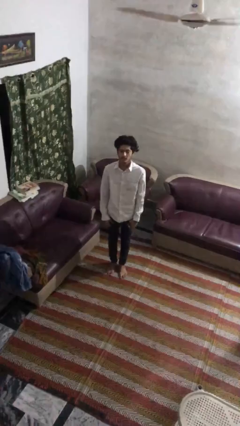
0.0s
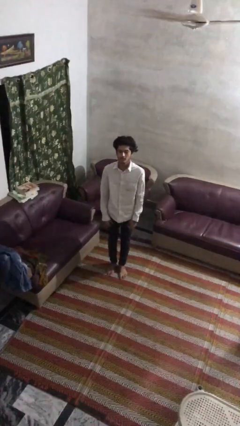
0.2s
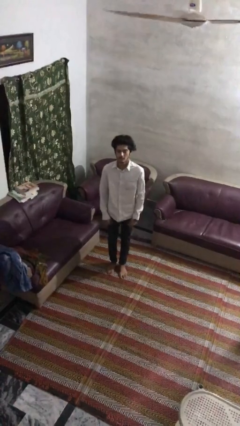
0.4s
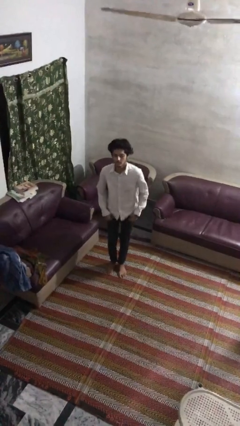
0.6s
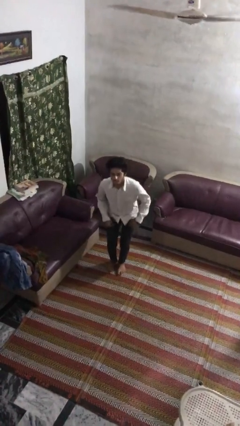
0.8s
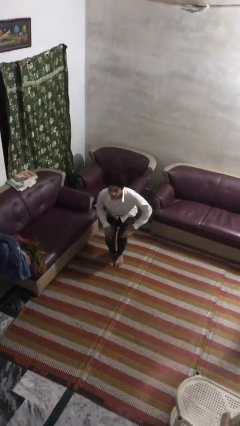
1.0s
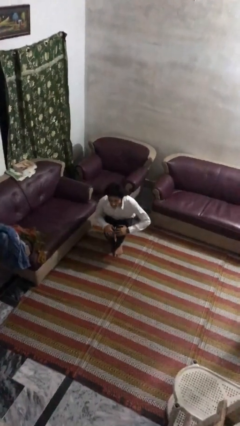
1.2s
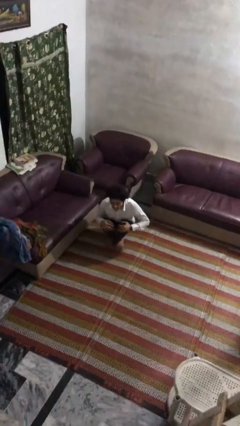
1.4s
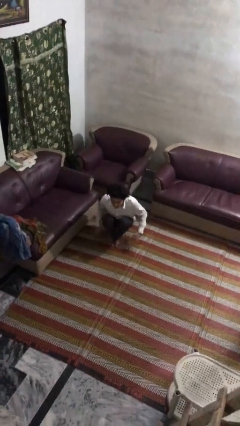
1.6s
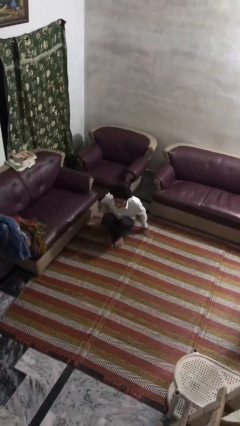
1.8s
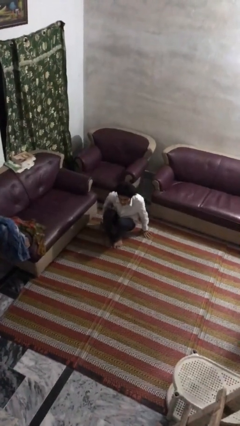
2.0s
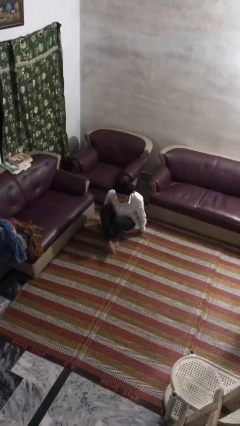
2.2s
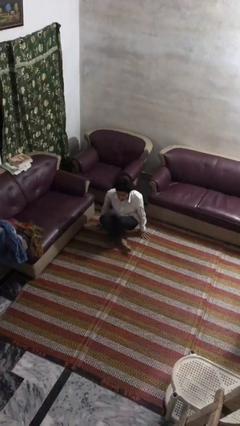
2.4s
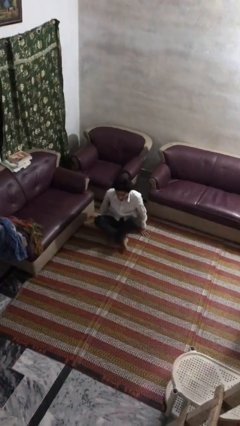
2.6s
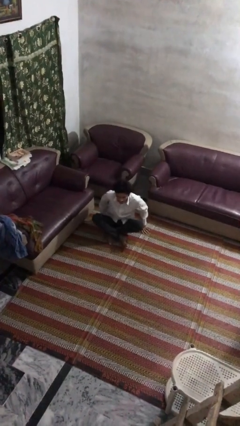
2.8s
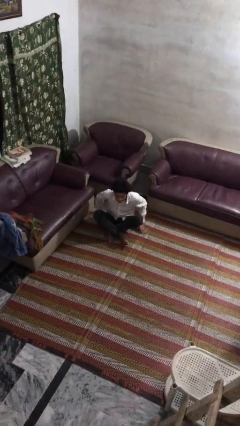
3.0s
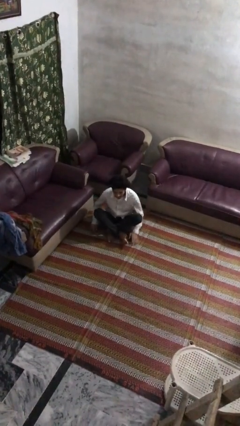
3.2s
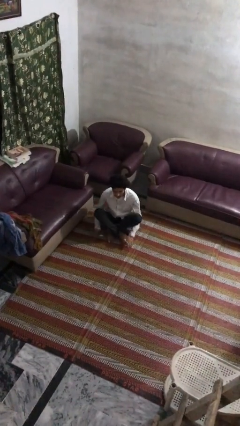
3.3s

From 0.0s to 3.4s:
person sits crisscross

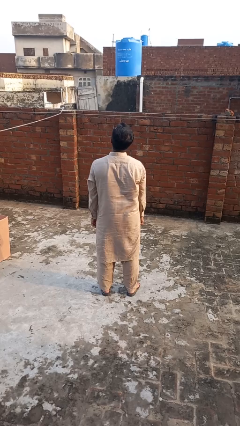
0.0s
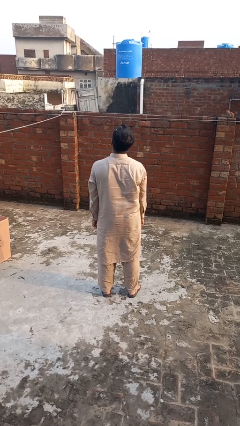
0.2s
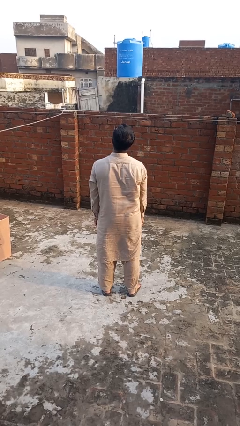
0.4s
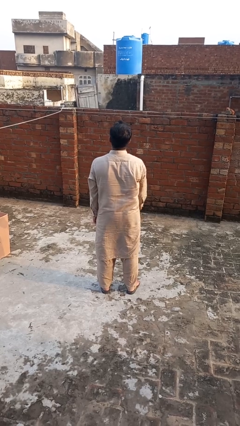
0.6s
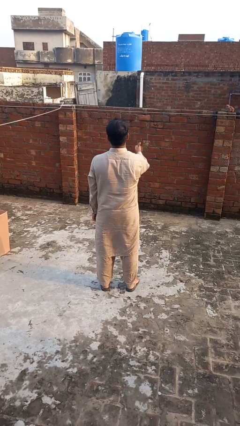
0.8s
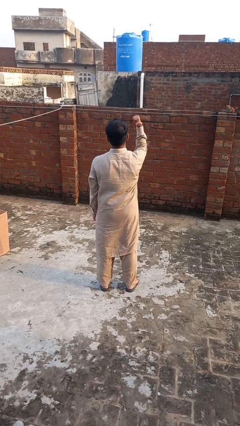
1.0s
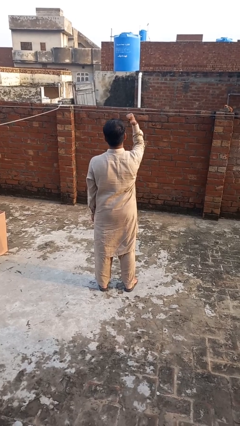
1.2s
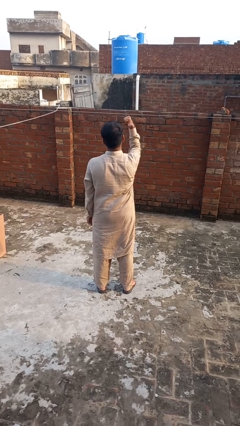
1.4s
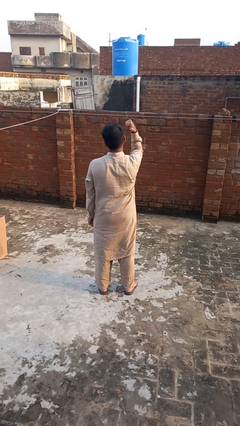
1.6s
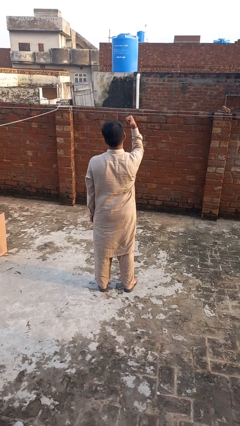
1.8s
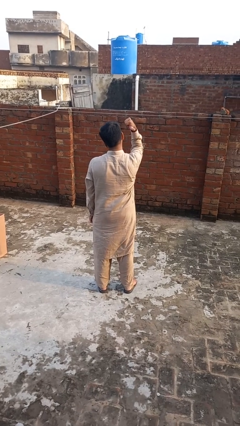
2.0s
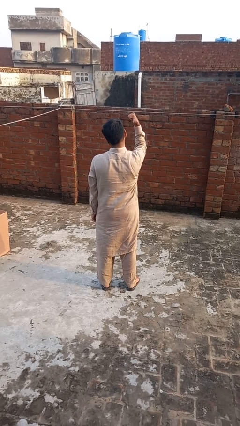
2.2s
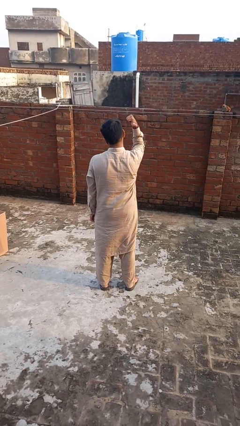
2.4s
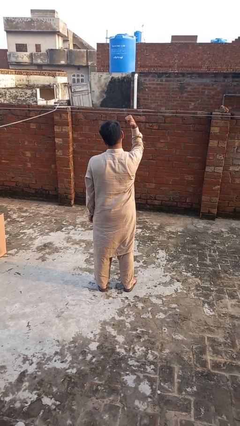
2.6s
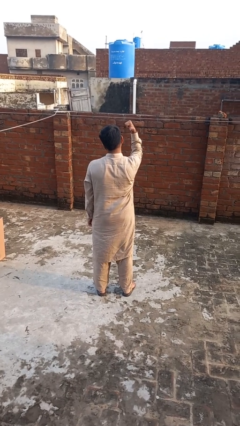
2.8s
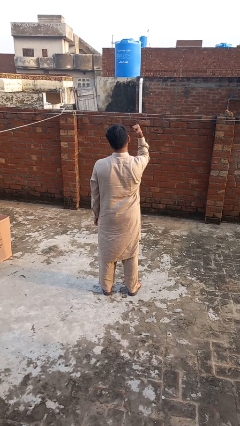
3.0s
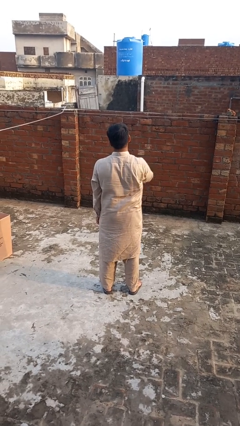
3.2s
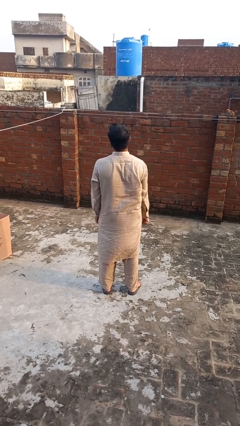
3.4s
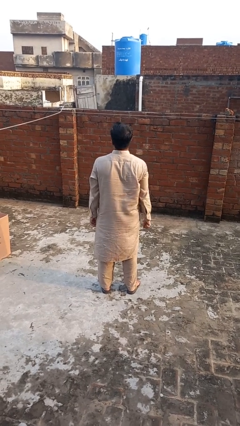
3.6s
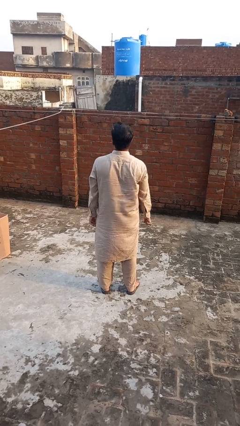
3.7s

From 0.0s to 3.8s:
person gestures behind me

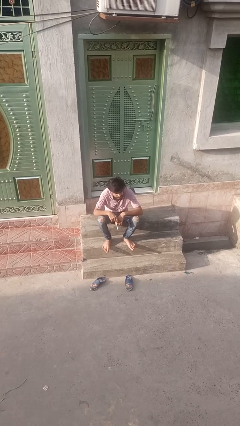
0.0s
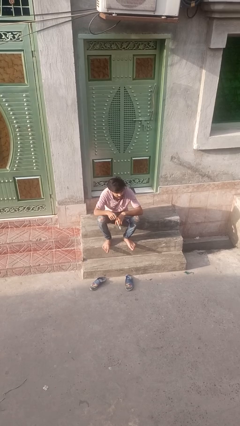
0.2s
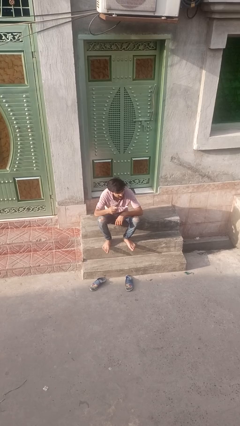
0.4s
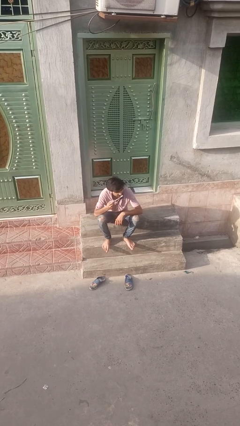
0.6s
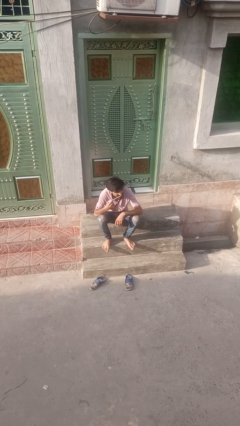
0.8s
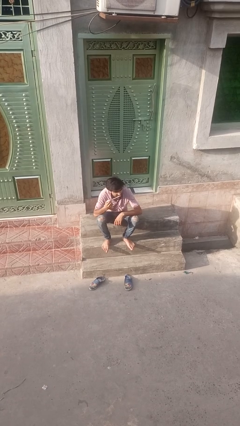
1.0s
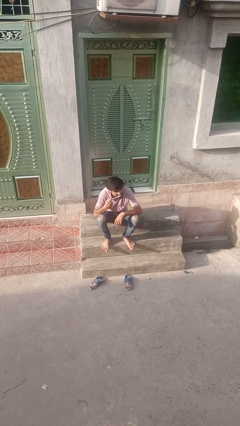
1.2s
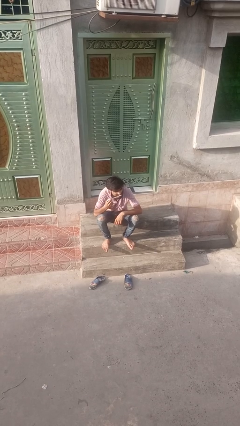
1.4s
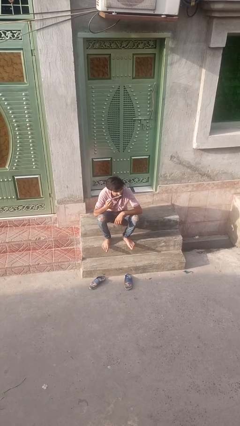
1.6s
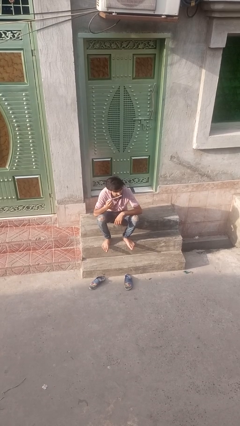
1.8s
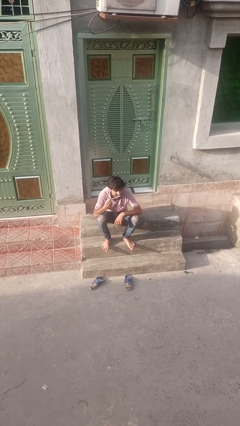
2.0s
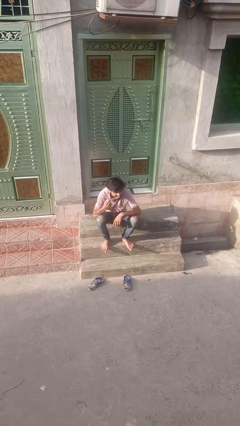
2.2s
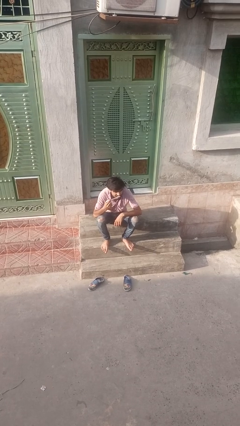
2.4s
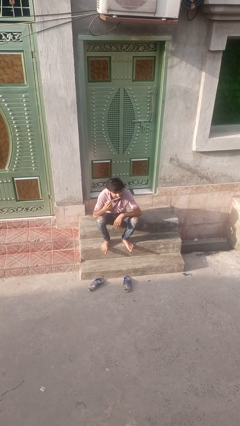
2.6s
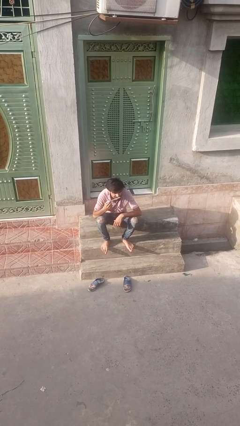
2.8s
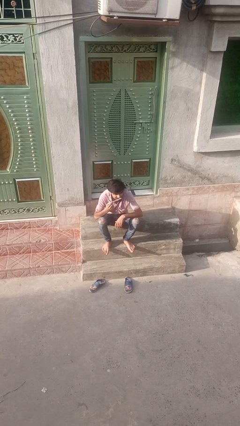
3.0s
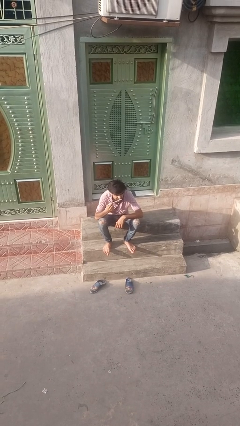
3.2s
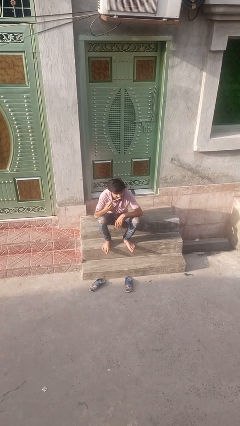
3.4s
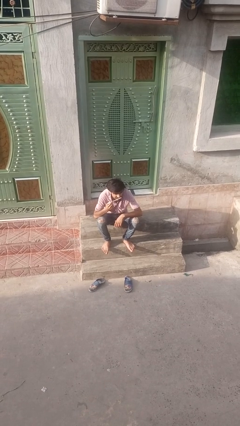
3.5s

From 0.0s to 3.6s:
person brushes hair

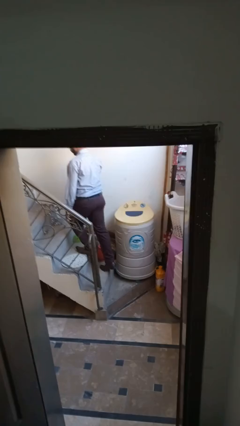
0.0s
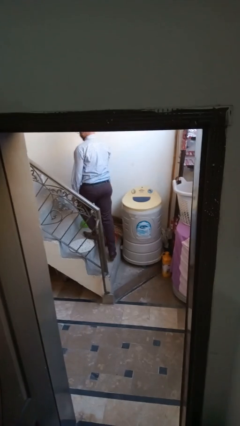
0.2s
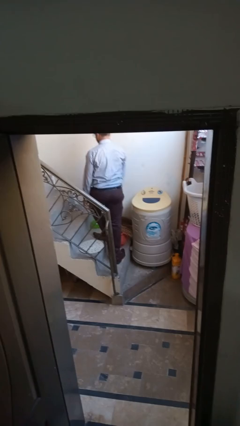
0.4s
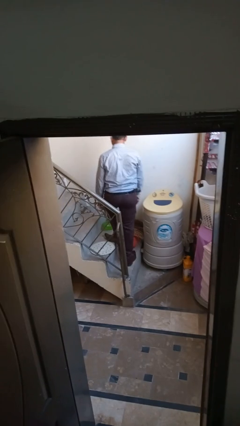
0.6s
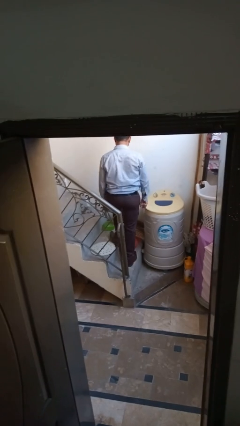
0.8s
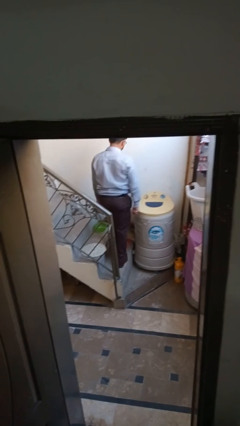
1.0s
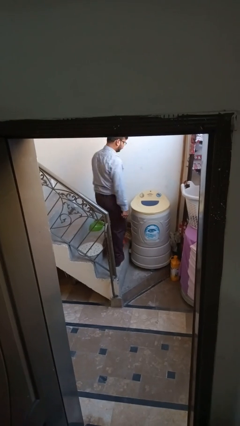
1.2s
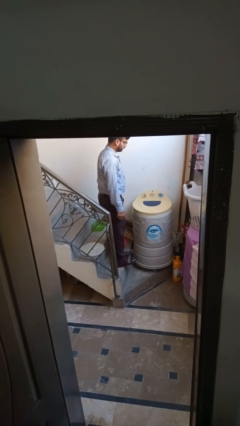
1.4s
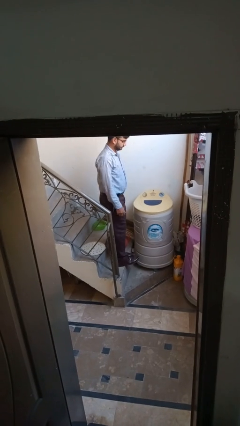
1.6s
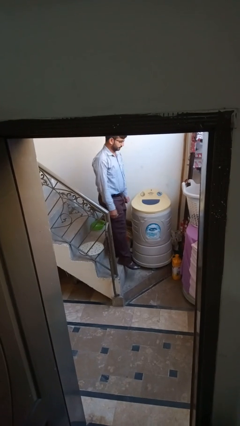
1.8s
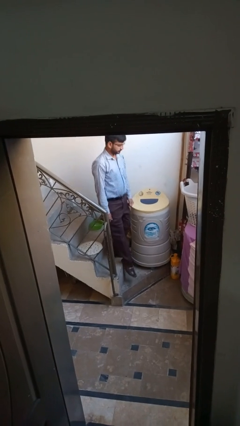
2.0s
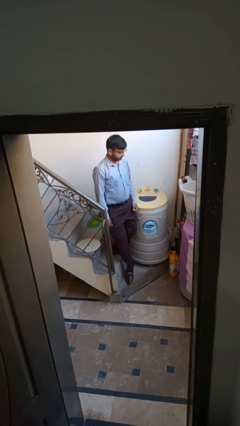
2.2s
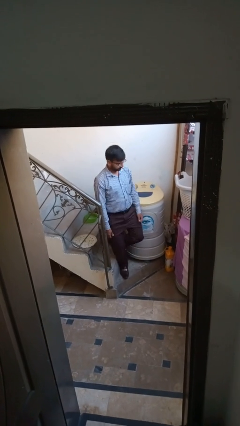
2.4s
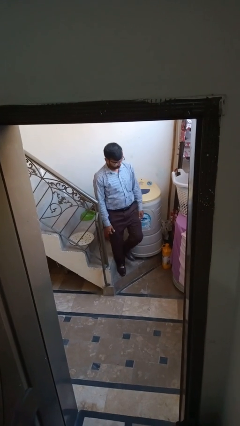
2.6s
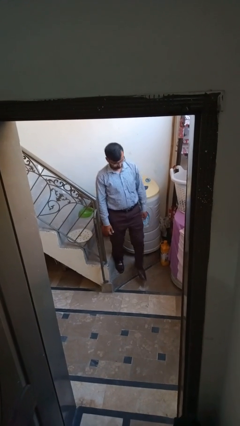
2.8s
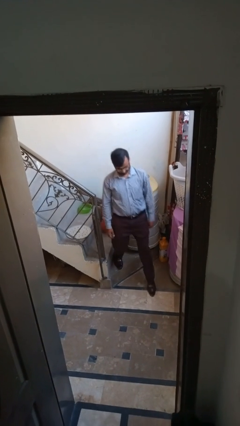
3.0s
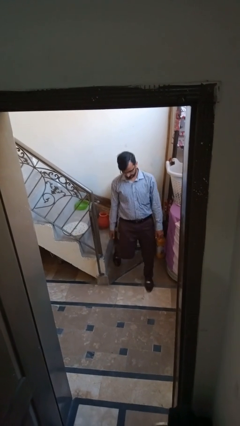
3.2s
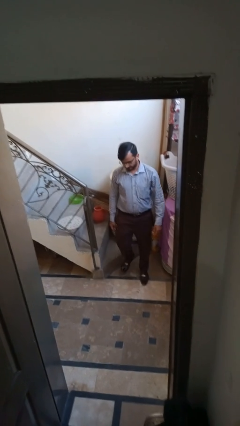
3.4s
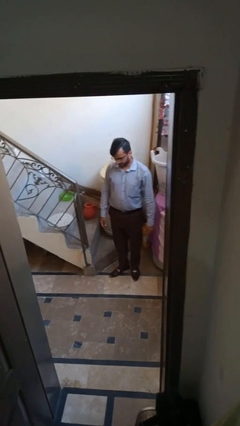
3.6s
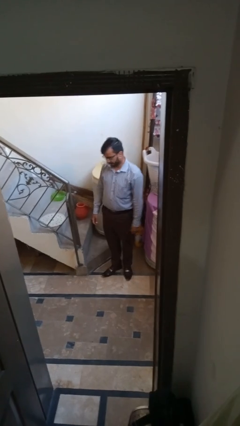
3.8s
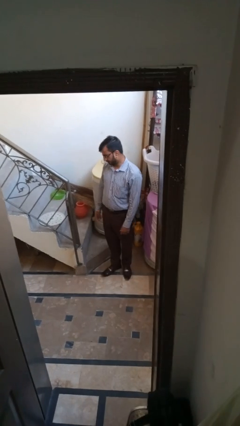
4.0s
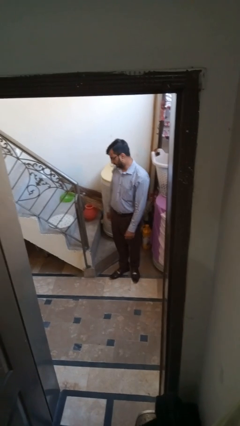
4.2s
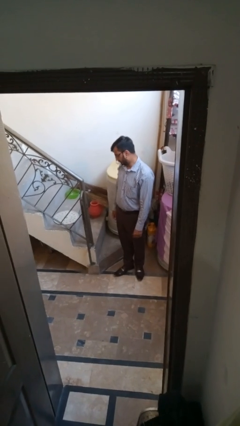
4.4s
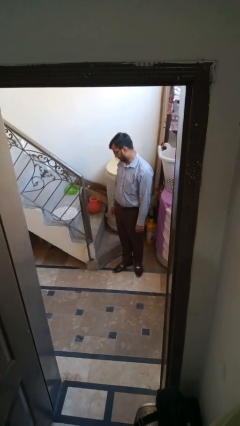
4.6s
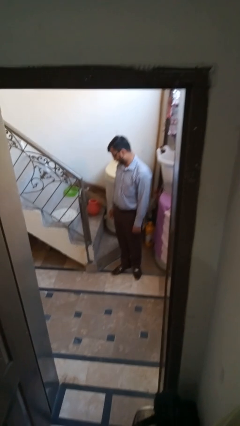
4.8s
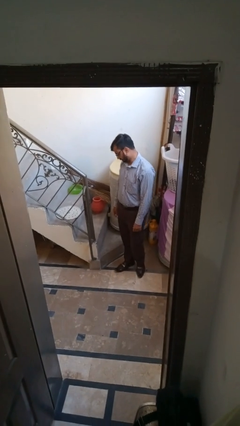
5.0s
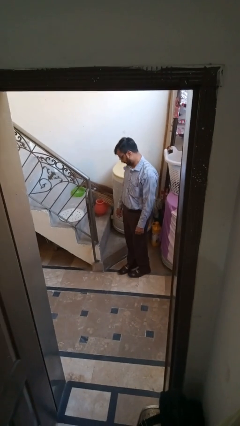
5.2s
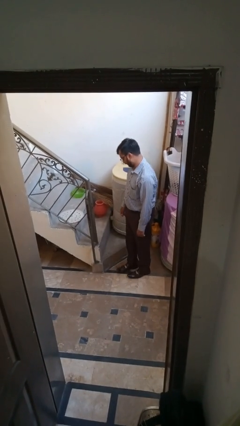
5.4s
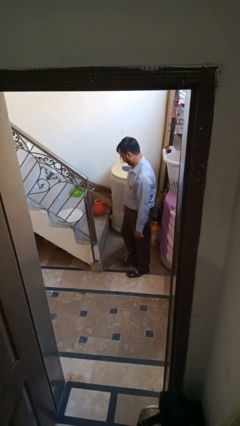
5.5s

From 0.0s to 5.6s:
person climbs down stairs

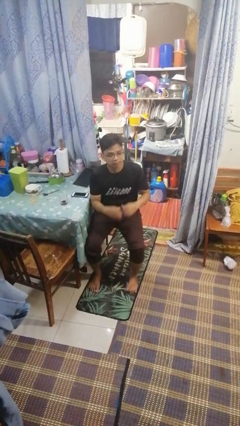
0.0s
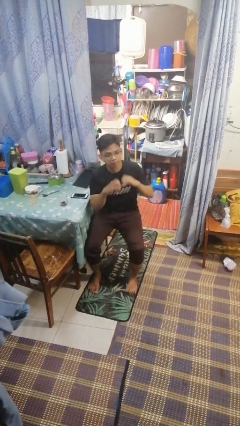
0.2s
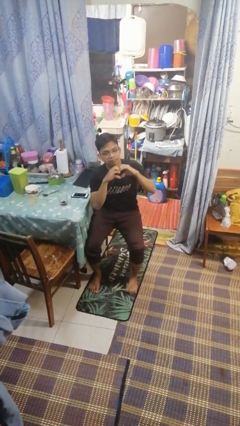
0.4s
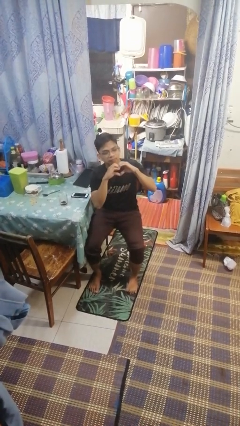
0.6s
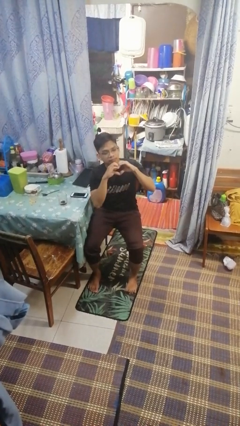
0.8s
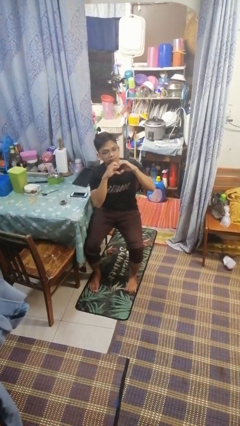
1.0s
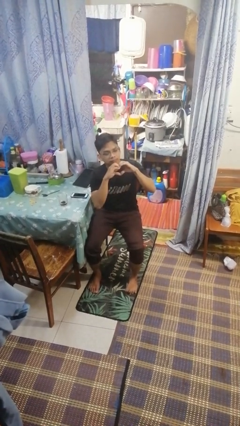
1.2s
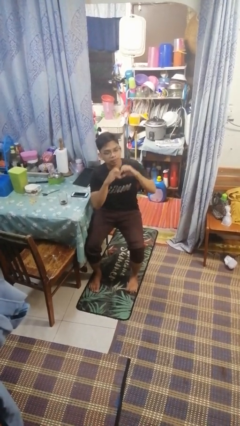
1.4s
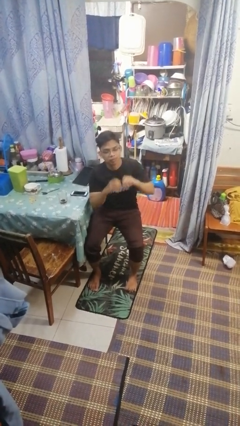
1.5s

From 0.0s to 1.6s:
person gestures heart
